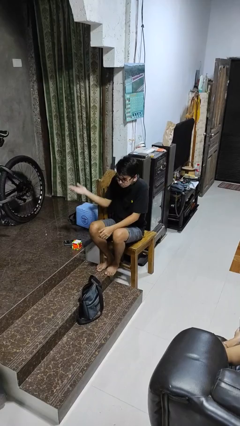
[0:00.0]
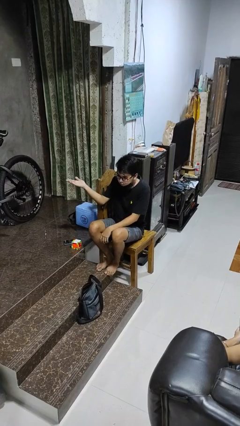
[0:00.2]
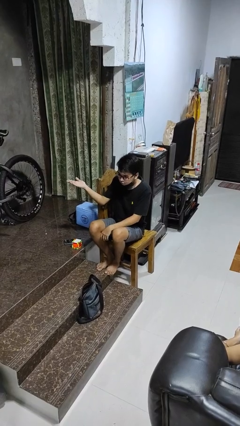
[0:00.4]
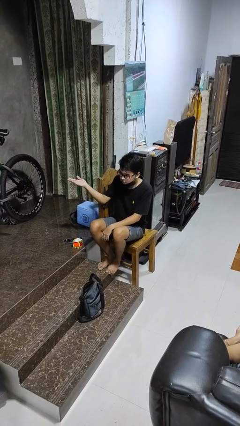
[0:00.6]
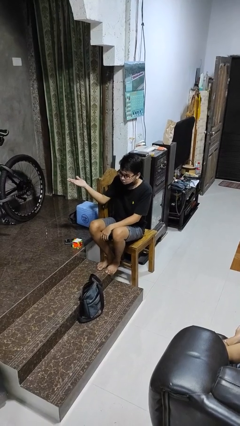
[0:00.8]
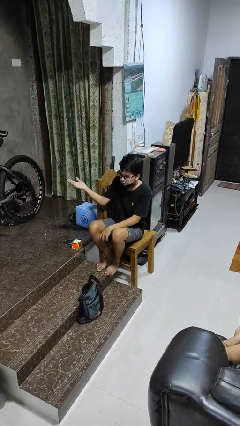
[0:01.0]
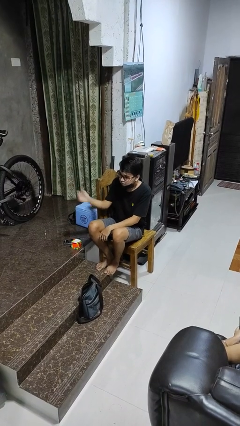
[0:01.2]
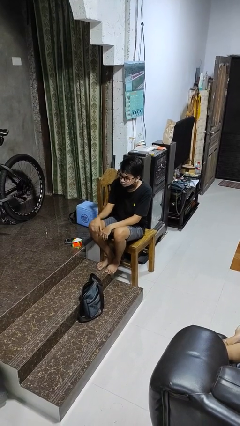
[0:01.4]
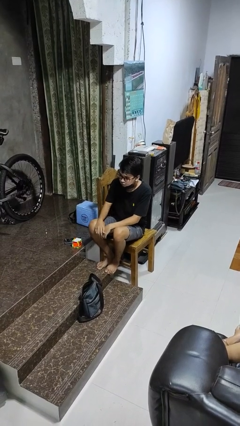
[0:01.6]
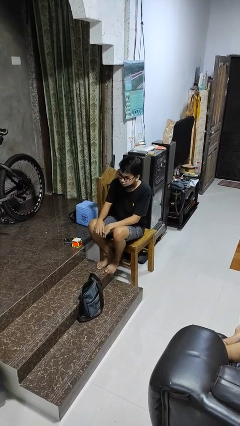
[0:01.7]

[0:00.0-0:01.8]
person shrugs

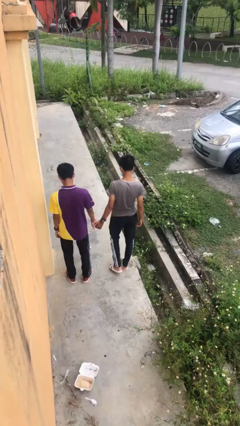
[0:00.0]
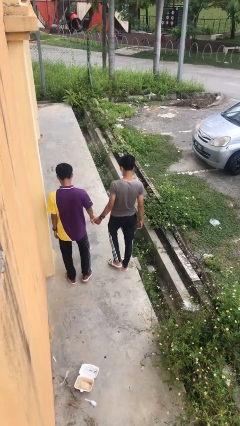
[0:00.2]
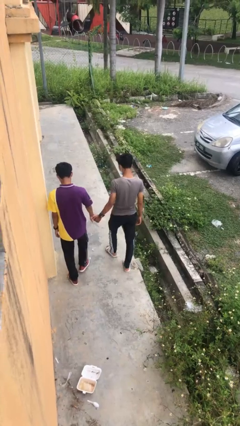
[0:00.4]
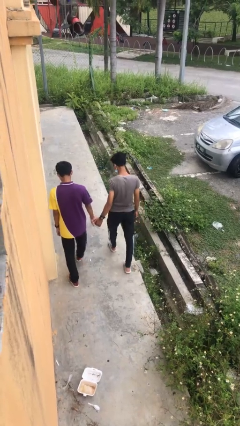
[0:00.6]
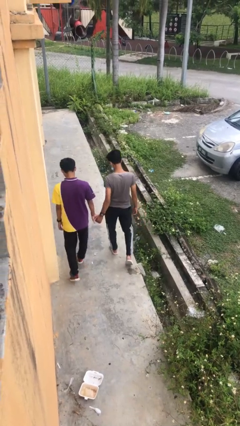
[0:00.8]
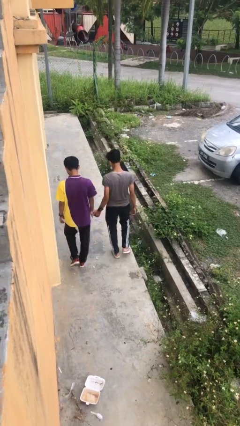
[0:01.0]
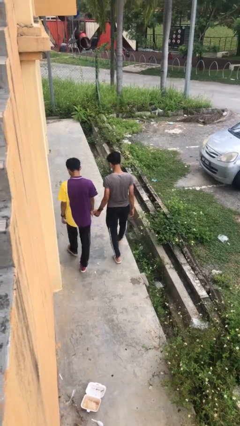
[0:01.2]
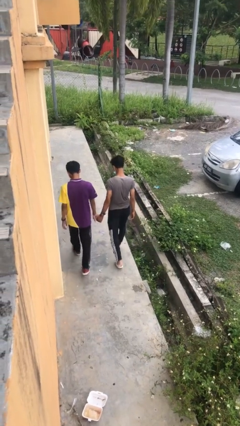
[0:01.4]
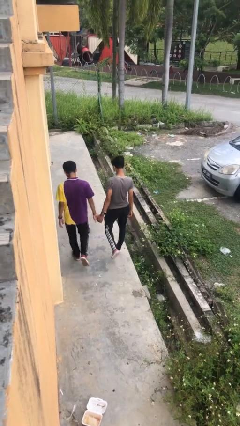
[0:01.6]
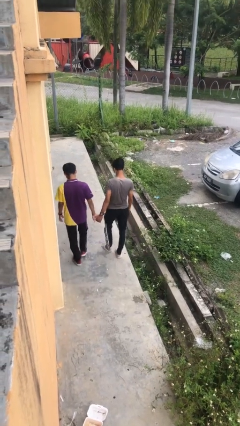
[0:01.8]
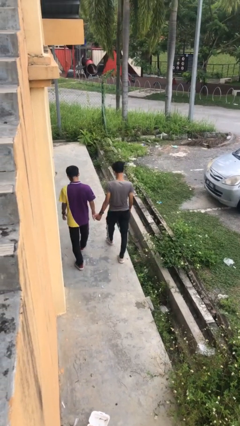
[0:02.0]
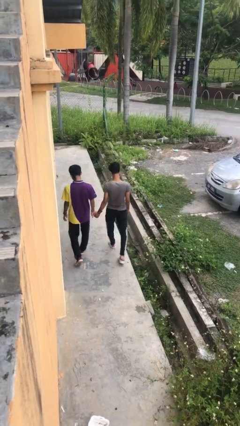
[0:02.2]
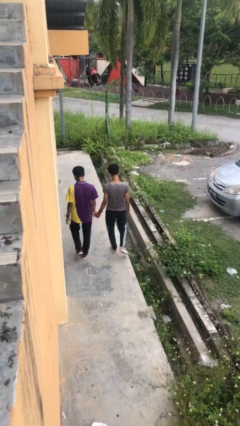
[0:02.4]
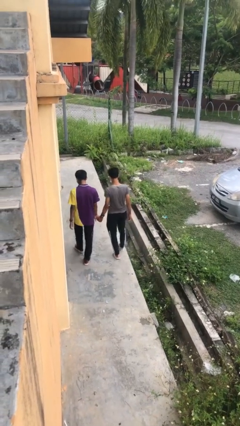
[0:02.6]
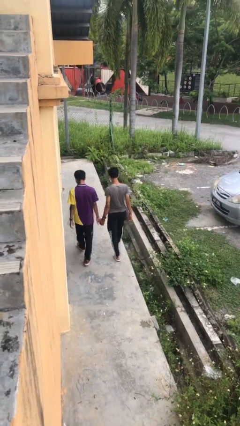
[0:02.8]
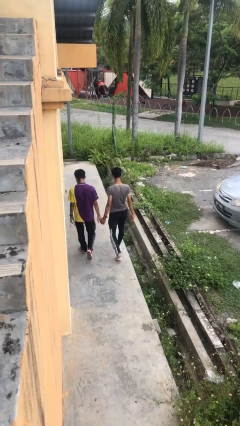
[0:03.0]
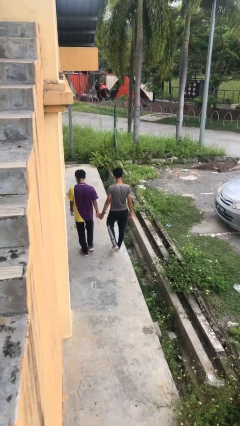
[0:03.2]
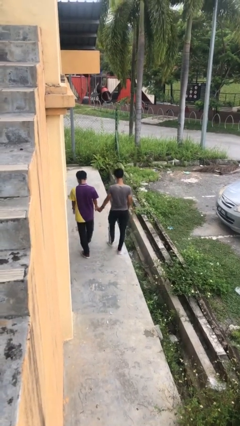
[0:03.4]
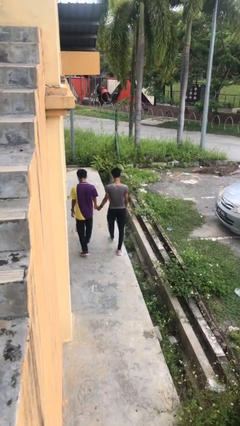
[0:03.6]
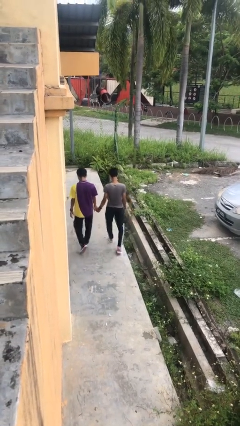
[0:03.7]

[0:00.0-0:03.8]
person holds hand

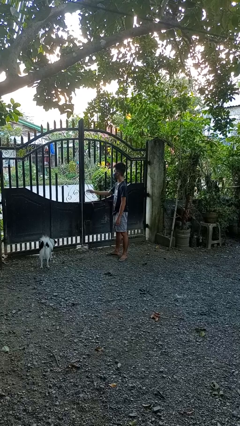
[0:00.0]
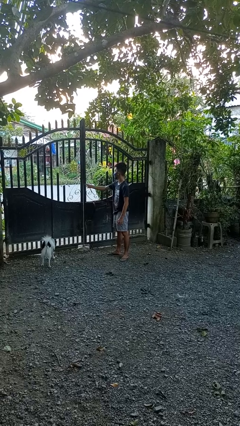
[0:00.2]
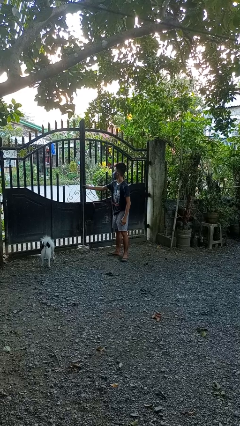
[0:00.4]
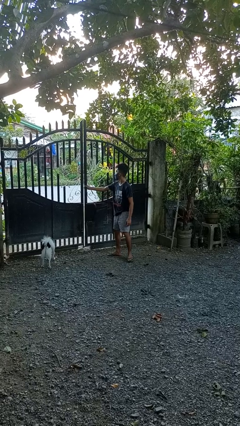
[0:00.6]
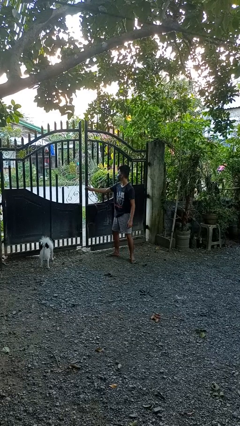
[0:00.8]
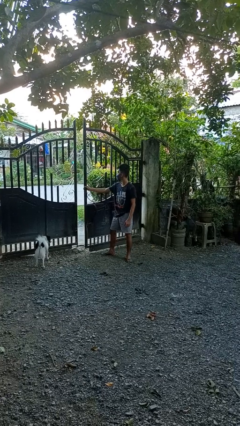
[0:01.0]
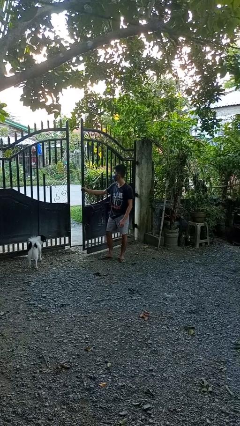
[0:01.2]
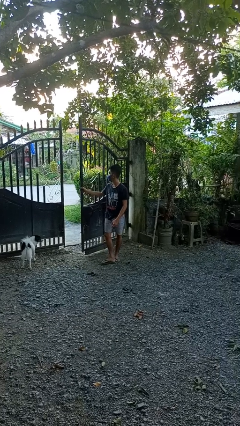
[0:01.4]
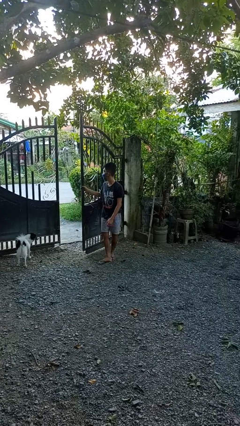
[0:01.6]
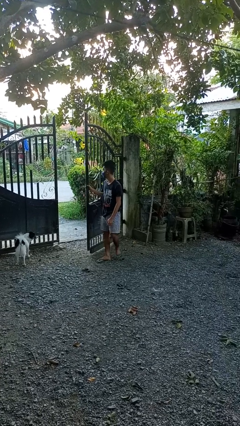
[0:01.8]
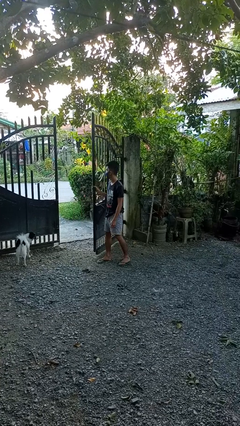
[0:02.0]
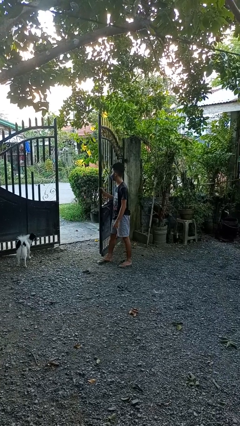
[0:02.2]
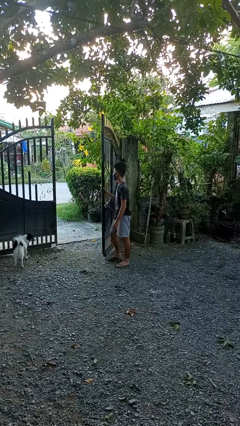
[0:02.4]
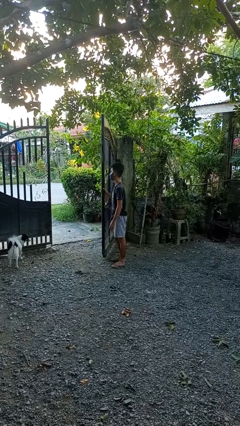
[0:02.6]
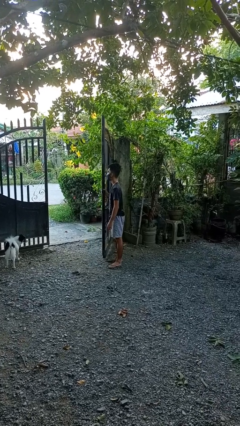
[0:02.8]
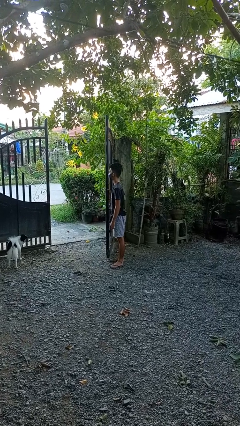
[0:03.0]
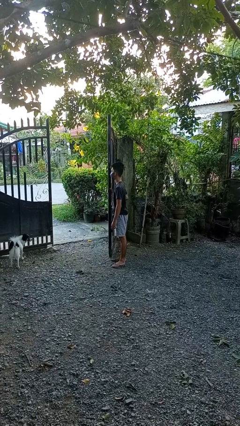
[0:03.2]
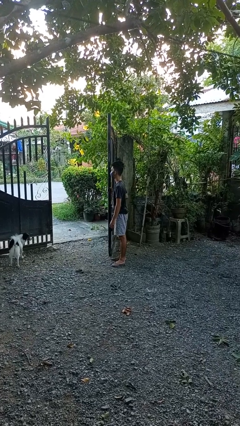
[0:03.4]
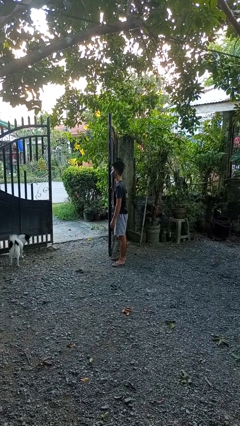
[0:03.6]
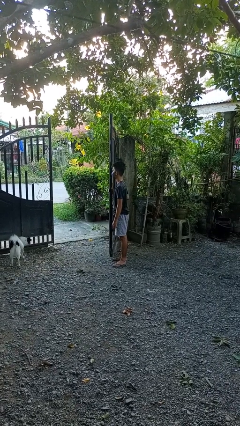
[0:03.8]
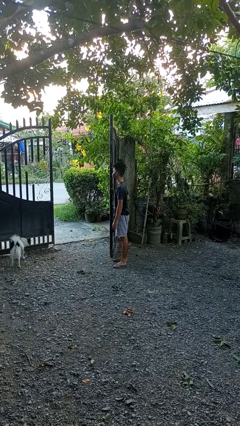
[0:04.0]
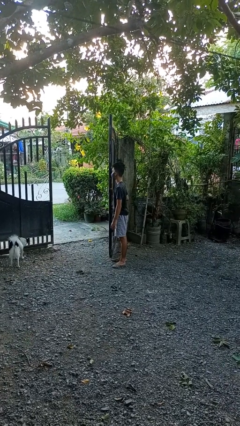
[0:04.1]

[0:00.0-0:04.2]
person opens gate

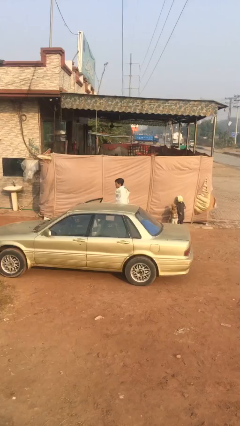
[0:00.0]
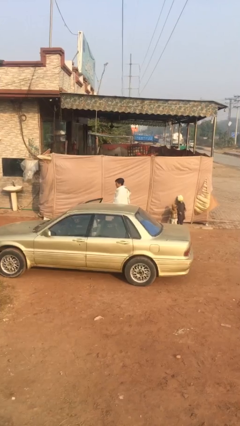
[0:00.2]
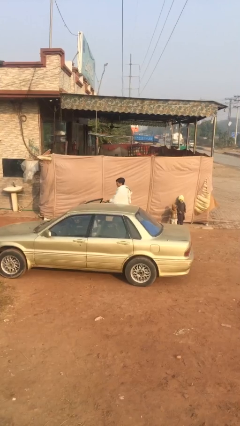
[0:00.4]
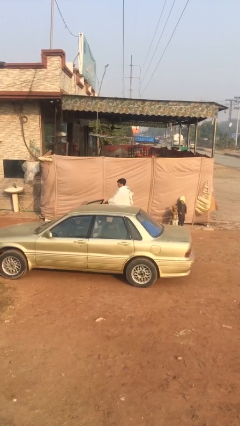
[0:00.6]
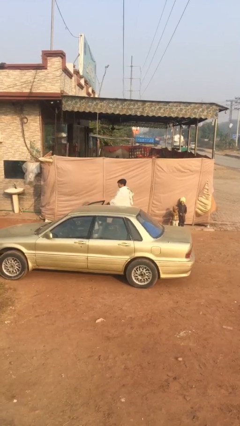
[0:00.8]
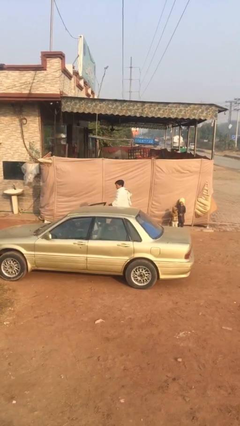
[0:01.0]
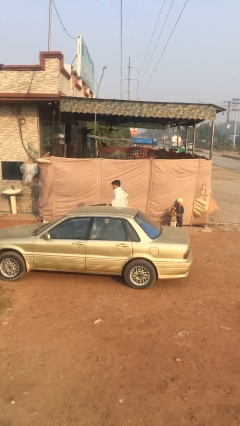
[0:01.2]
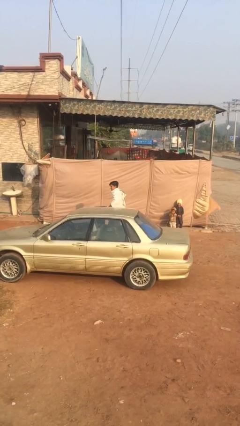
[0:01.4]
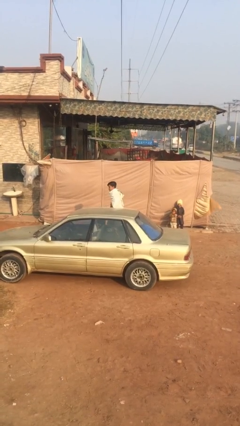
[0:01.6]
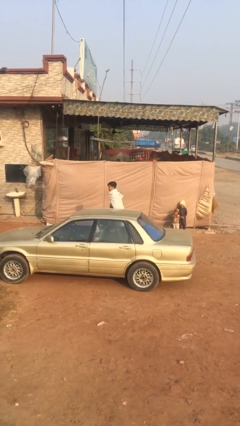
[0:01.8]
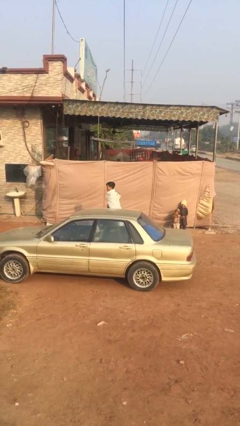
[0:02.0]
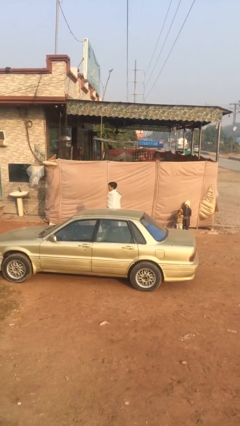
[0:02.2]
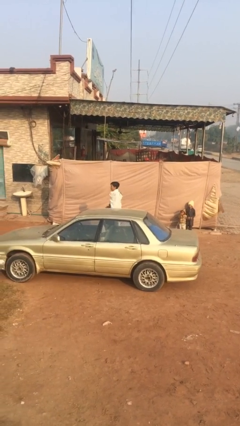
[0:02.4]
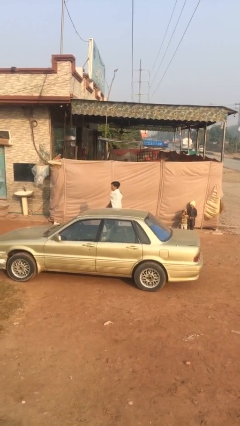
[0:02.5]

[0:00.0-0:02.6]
person closes car door

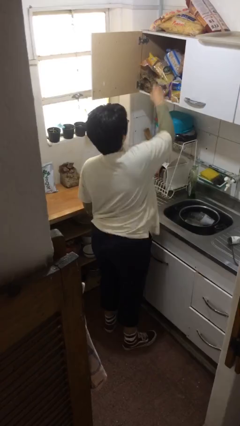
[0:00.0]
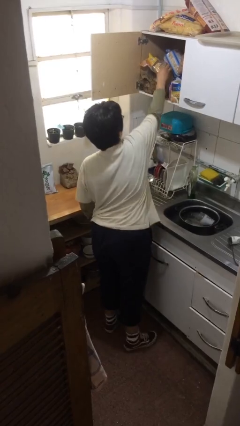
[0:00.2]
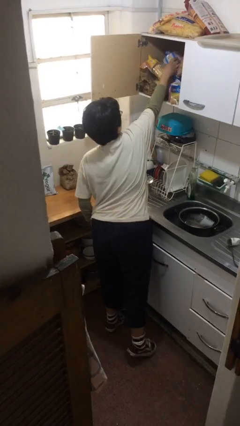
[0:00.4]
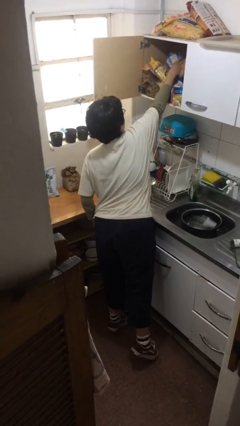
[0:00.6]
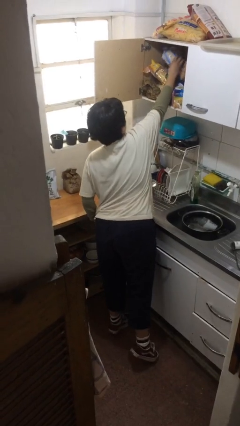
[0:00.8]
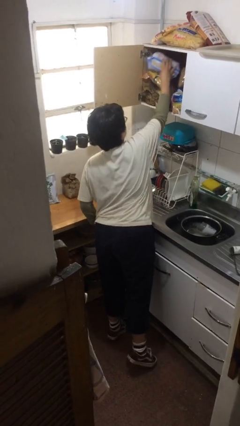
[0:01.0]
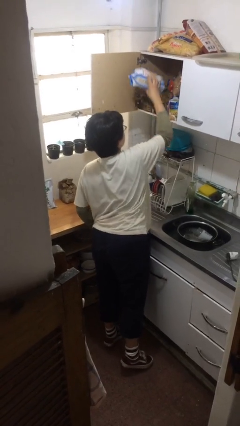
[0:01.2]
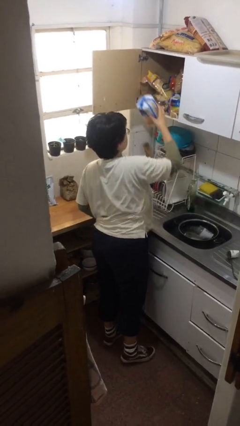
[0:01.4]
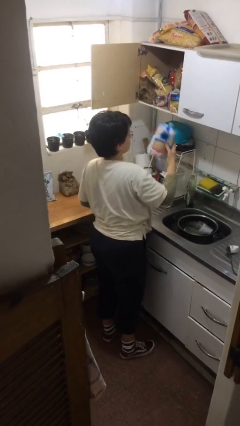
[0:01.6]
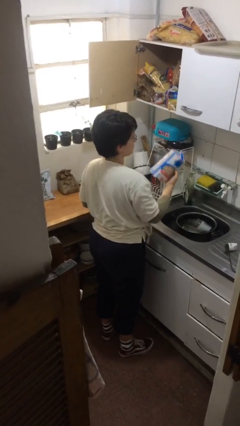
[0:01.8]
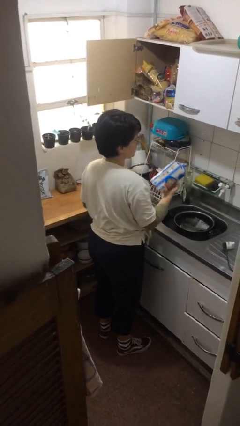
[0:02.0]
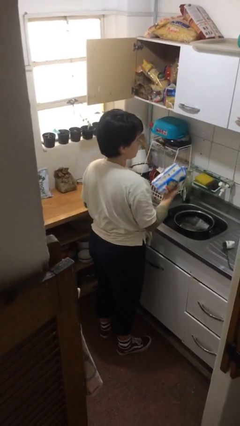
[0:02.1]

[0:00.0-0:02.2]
person takes object from cabinet

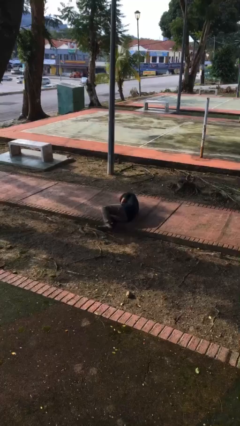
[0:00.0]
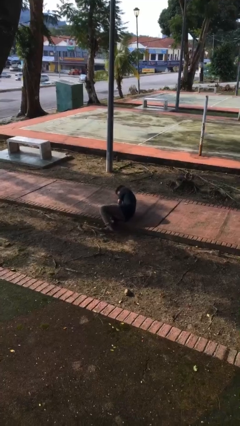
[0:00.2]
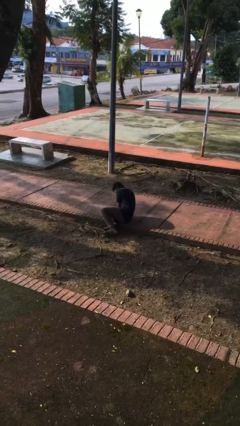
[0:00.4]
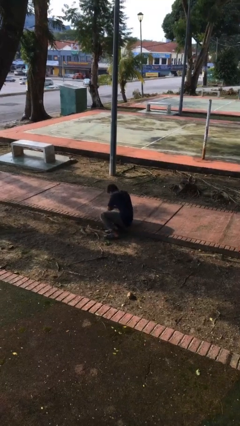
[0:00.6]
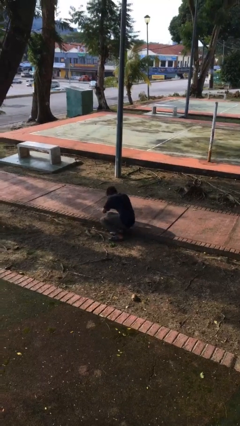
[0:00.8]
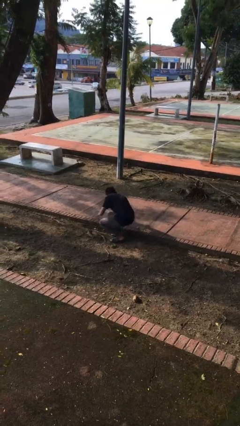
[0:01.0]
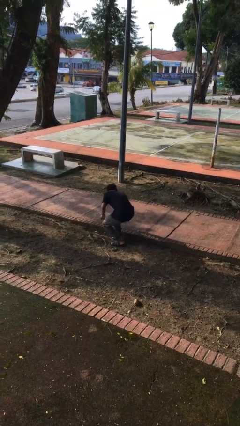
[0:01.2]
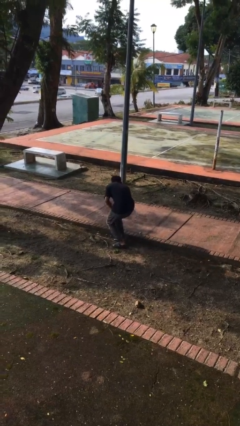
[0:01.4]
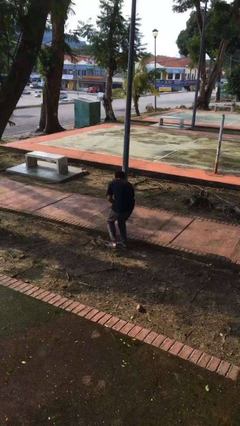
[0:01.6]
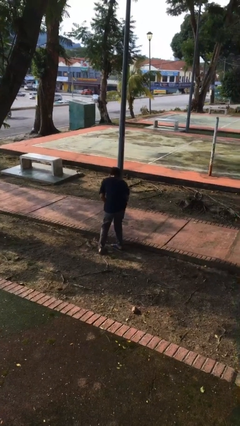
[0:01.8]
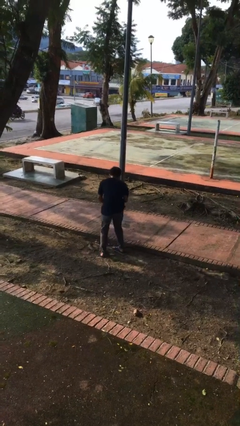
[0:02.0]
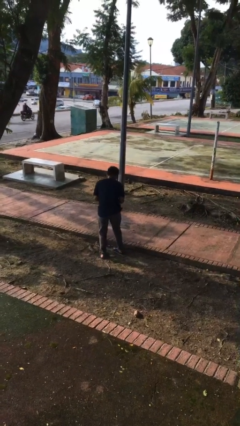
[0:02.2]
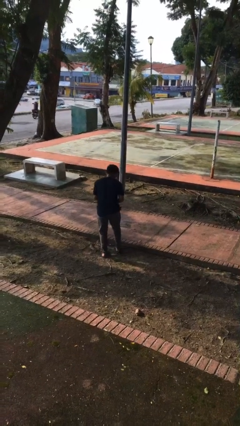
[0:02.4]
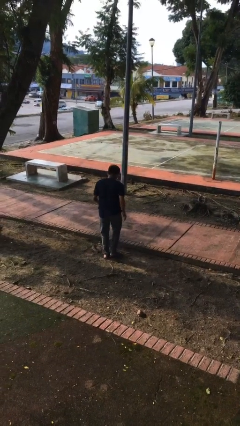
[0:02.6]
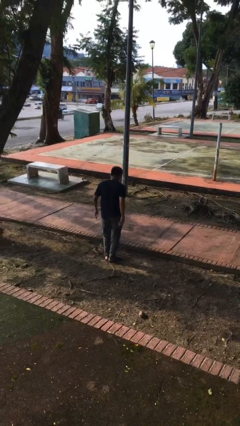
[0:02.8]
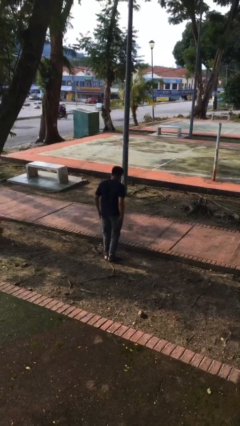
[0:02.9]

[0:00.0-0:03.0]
person stands up from floor
